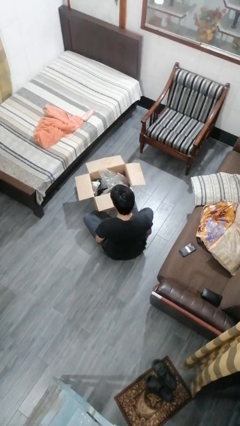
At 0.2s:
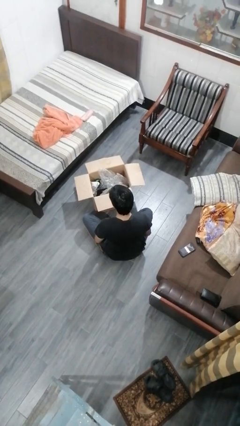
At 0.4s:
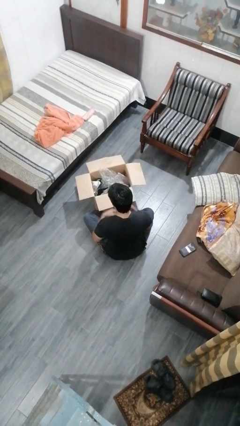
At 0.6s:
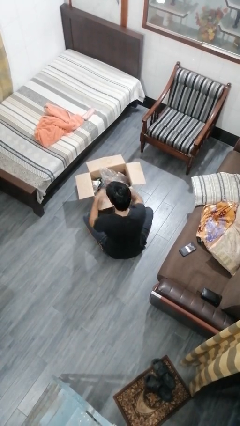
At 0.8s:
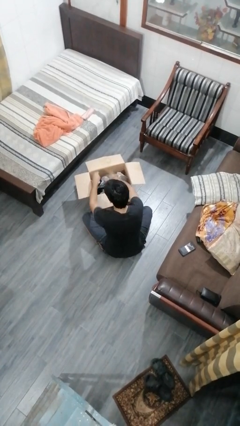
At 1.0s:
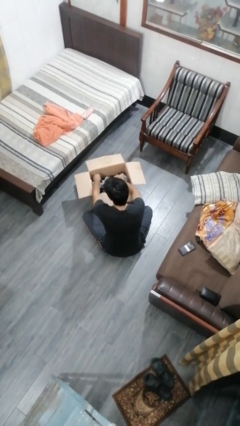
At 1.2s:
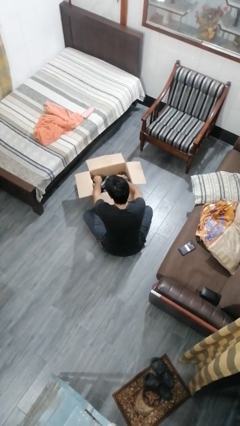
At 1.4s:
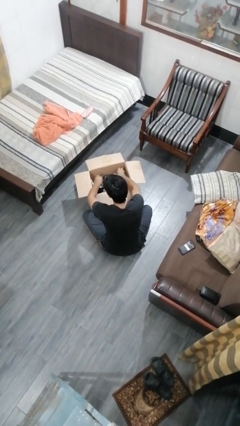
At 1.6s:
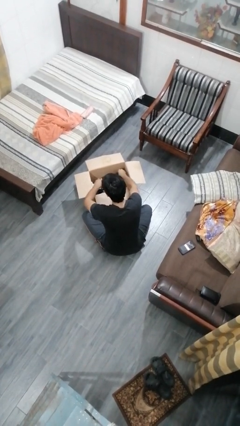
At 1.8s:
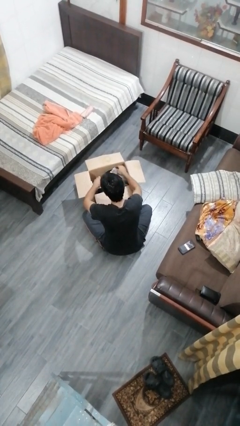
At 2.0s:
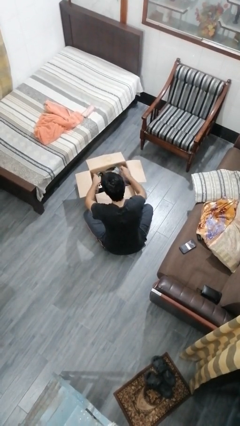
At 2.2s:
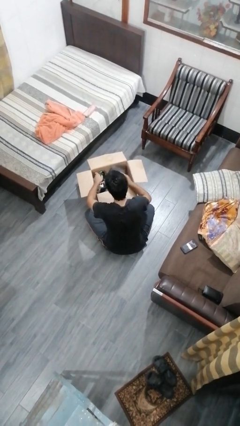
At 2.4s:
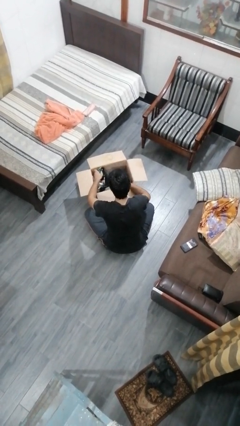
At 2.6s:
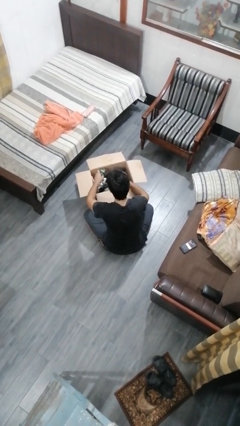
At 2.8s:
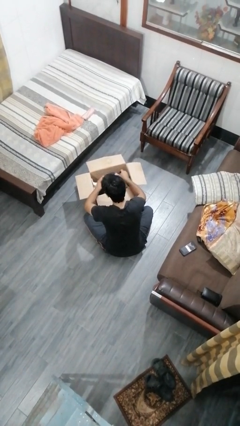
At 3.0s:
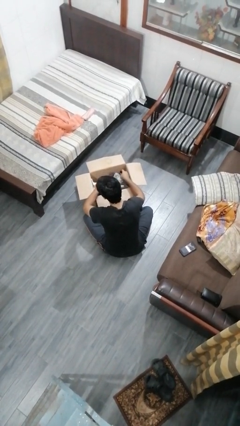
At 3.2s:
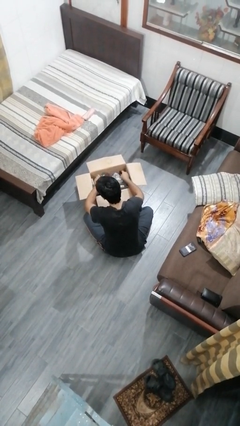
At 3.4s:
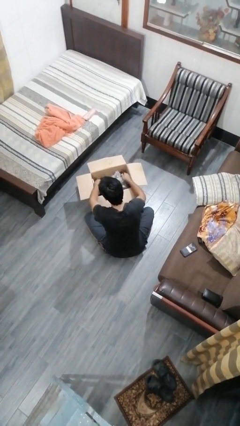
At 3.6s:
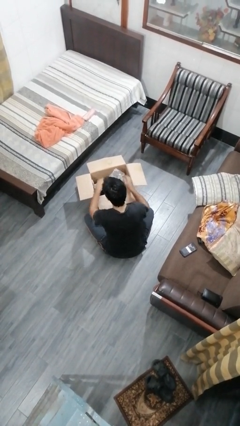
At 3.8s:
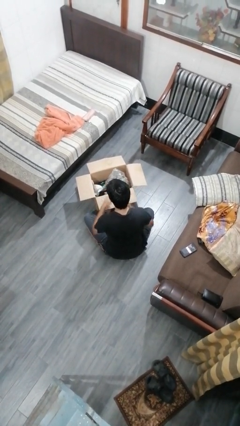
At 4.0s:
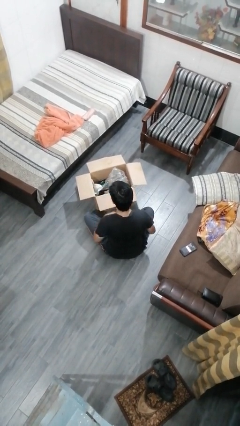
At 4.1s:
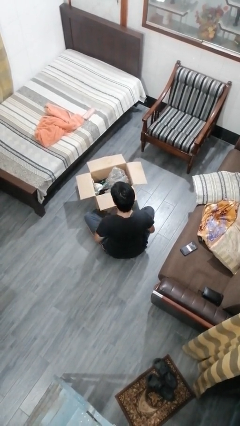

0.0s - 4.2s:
person searches in box

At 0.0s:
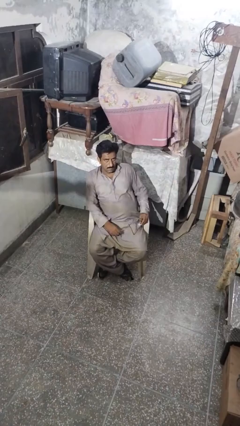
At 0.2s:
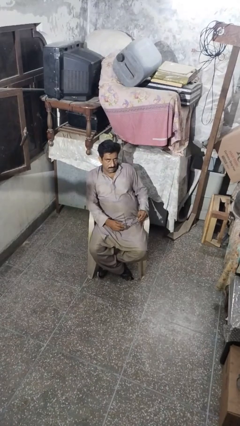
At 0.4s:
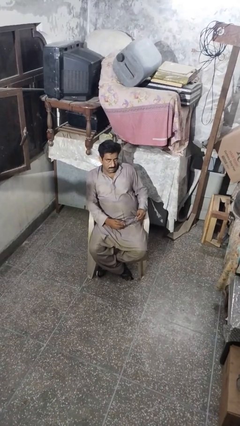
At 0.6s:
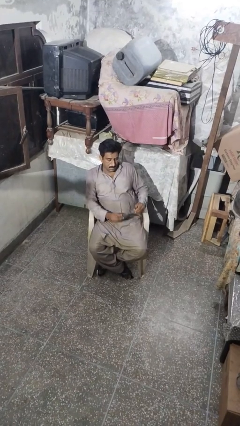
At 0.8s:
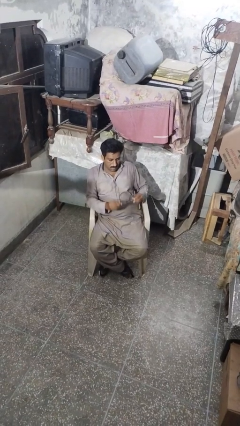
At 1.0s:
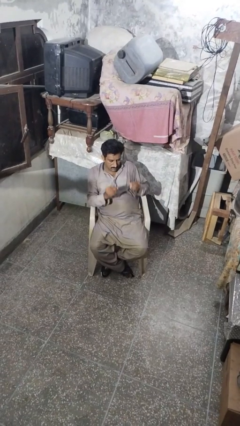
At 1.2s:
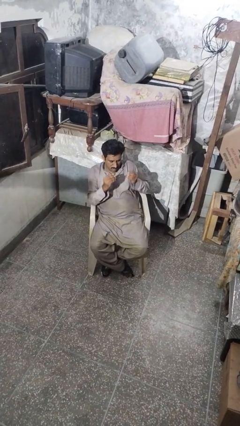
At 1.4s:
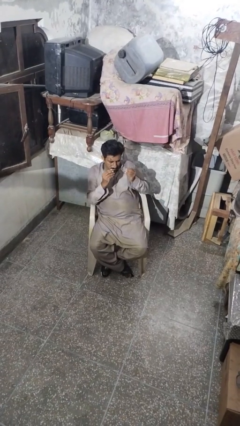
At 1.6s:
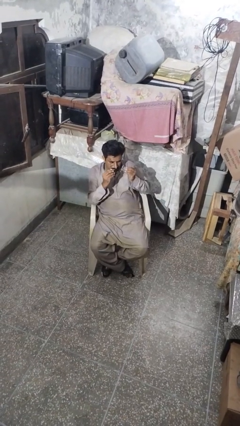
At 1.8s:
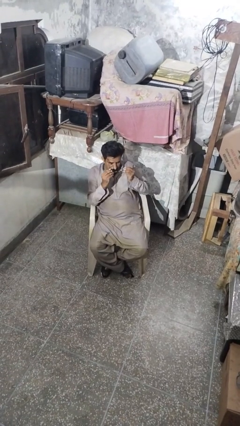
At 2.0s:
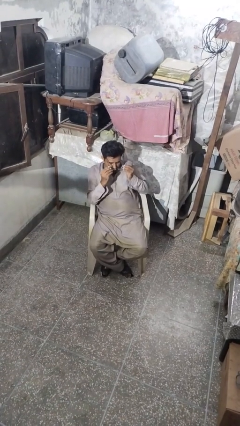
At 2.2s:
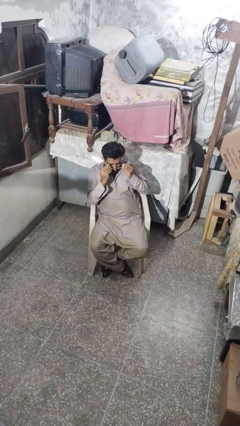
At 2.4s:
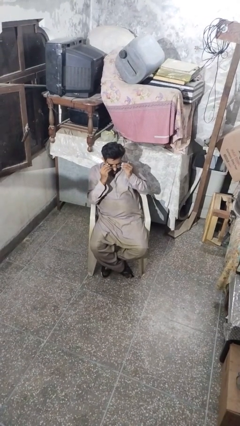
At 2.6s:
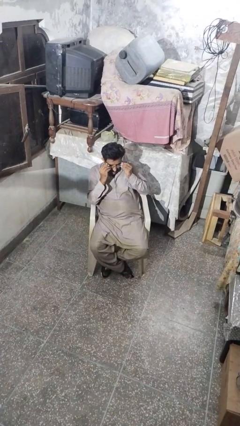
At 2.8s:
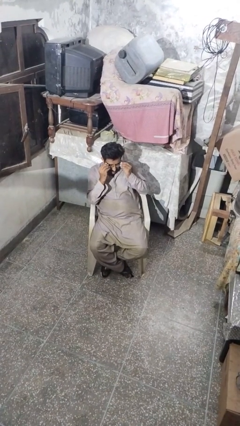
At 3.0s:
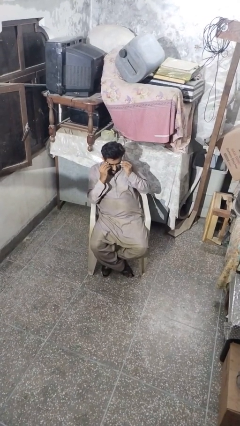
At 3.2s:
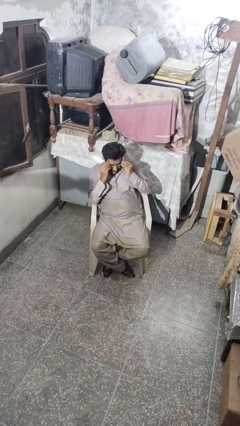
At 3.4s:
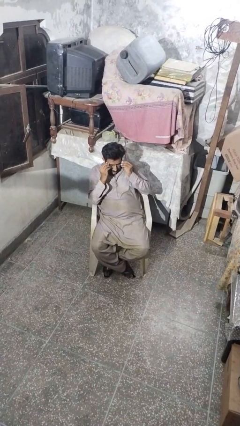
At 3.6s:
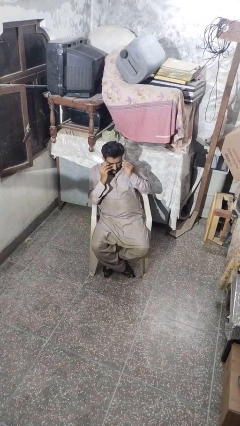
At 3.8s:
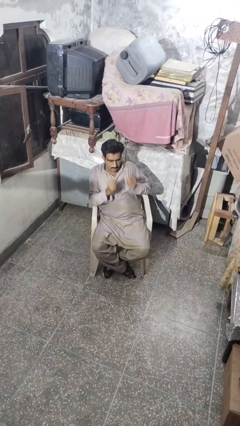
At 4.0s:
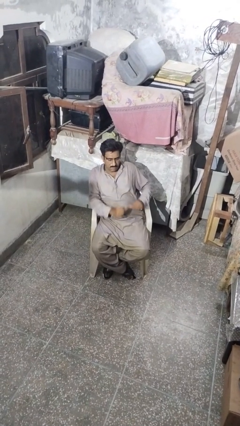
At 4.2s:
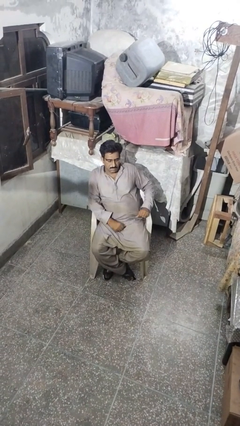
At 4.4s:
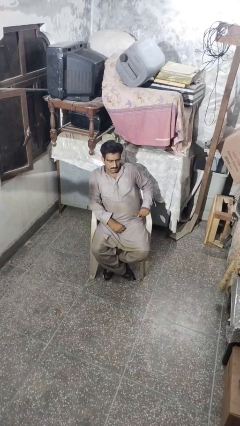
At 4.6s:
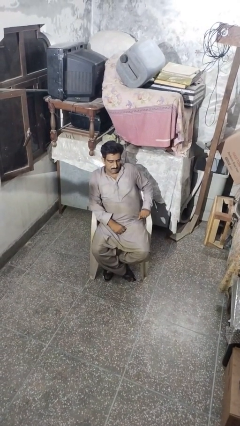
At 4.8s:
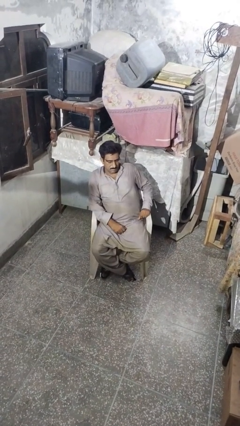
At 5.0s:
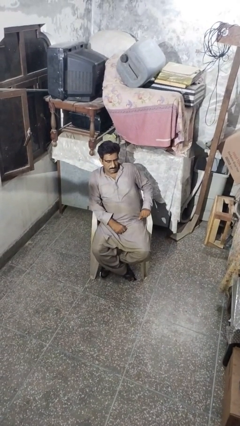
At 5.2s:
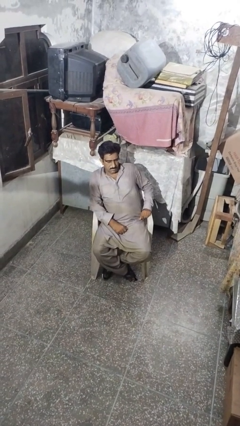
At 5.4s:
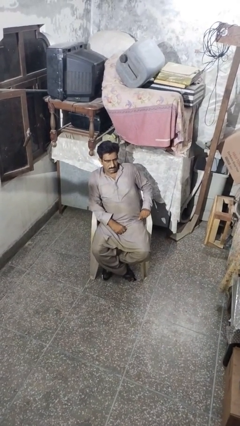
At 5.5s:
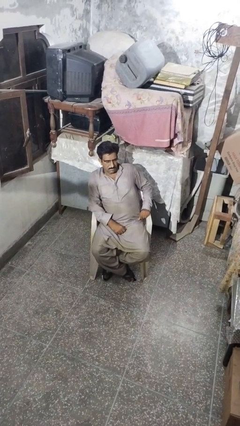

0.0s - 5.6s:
person puts on glasses

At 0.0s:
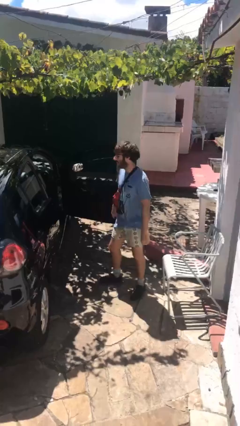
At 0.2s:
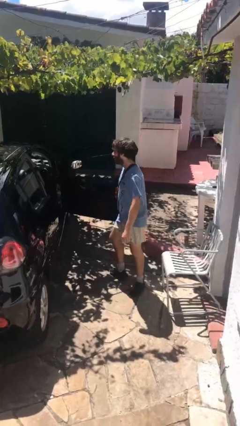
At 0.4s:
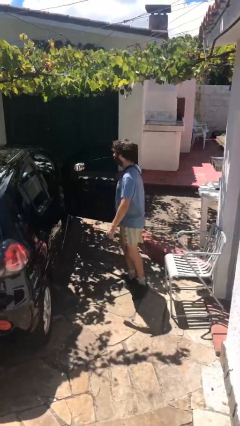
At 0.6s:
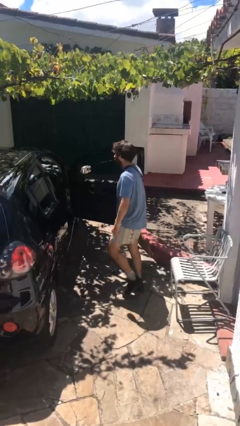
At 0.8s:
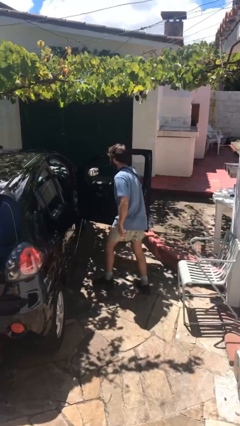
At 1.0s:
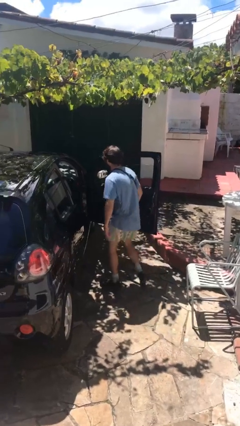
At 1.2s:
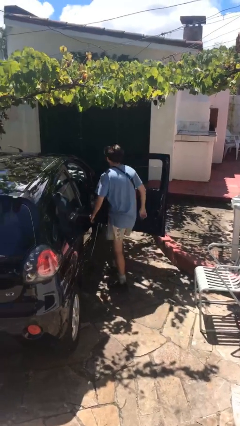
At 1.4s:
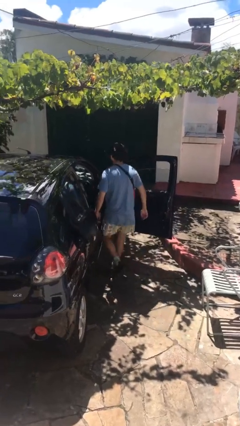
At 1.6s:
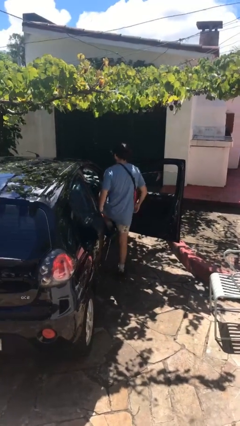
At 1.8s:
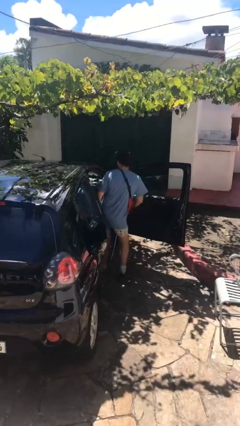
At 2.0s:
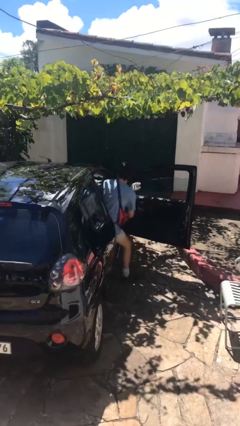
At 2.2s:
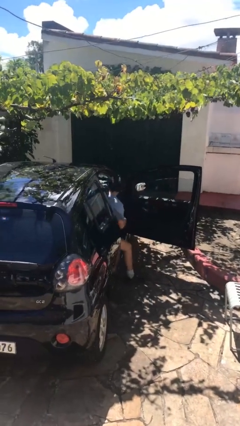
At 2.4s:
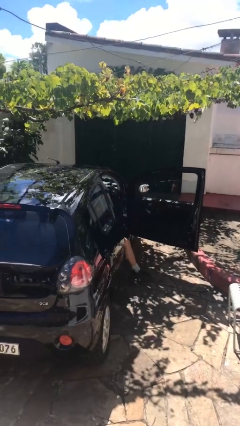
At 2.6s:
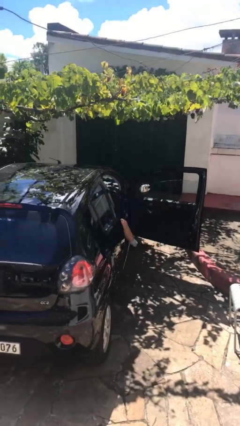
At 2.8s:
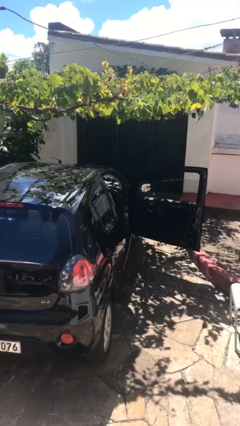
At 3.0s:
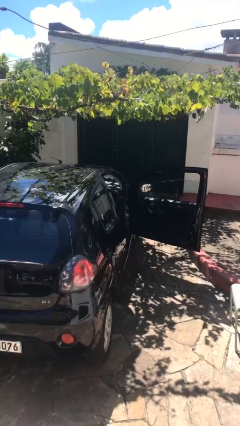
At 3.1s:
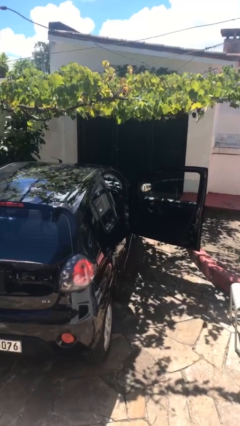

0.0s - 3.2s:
person enters car

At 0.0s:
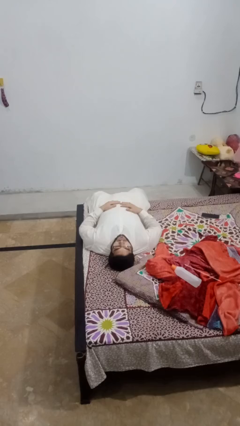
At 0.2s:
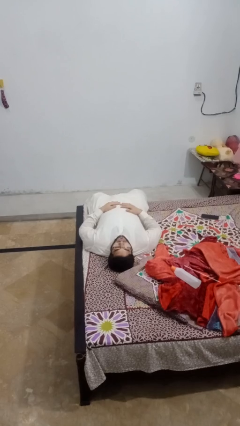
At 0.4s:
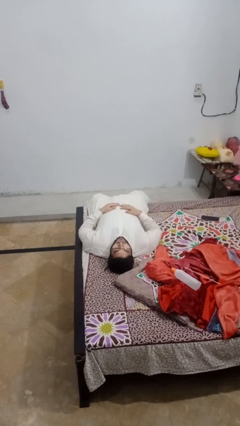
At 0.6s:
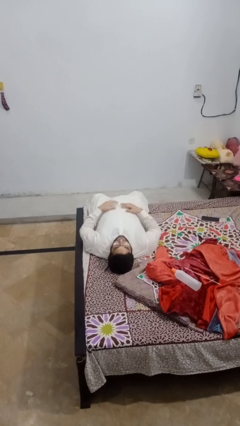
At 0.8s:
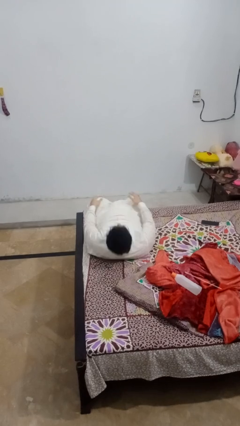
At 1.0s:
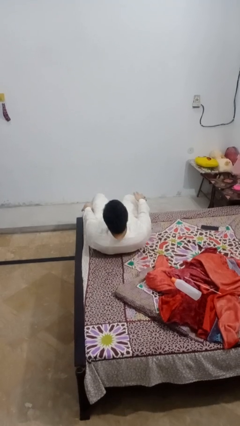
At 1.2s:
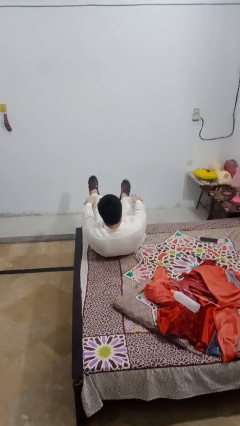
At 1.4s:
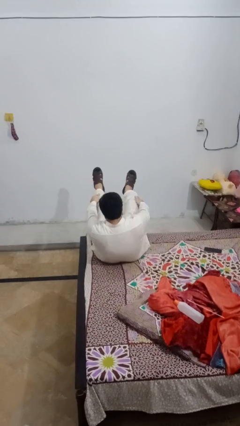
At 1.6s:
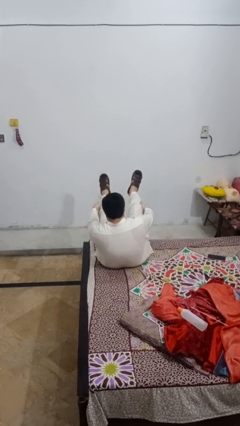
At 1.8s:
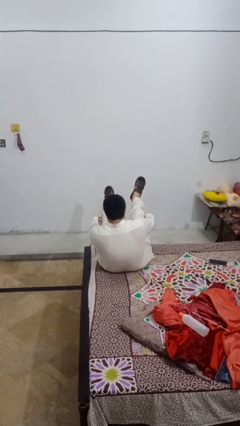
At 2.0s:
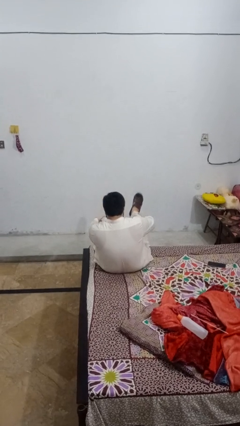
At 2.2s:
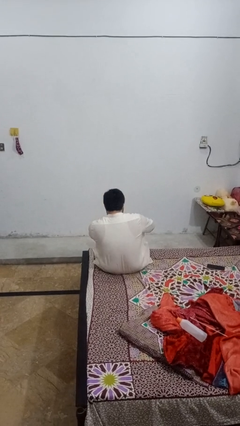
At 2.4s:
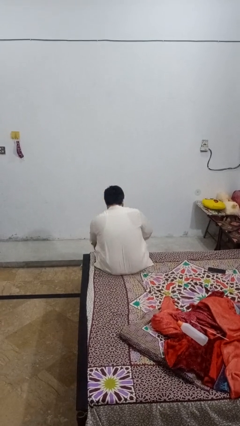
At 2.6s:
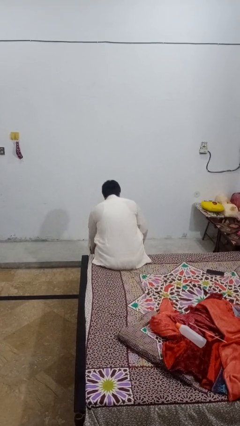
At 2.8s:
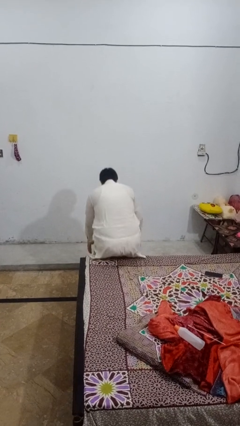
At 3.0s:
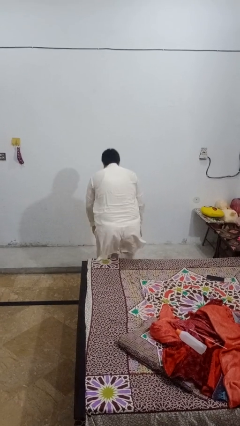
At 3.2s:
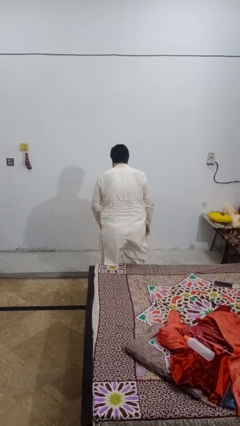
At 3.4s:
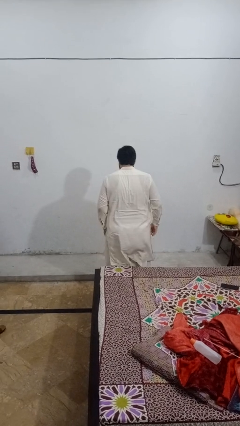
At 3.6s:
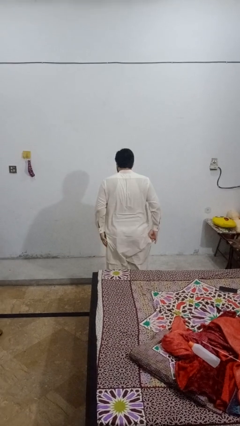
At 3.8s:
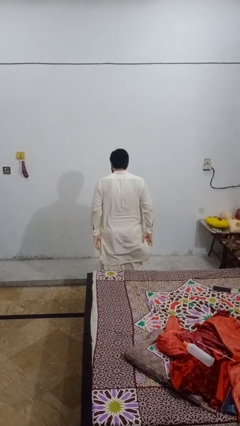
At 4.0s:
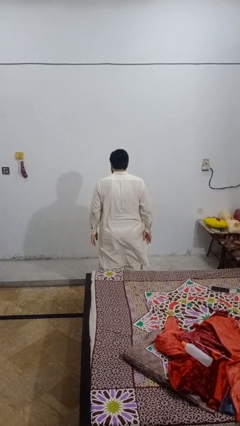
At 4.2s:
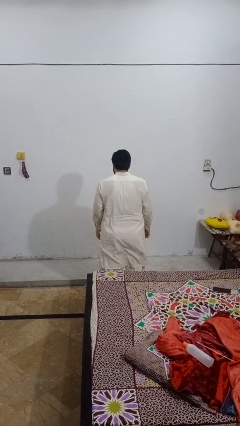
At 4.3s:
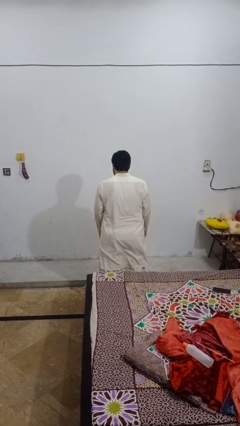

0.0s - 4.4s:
person stands up

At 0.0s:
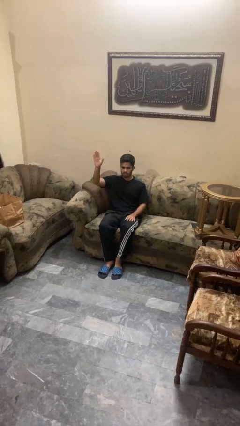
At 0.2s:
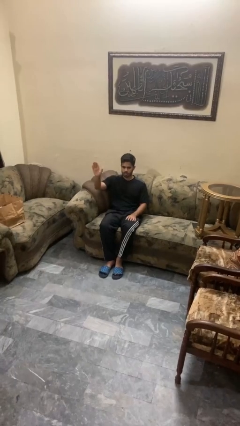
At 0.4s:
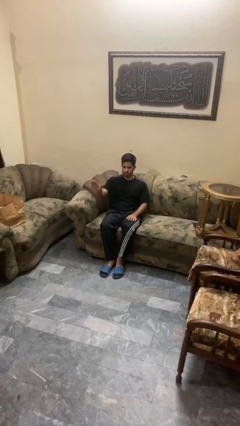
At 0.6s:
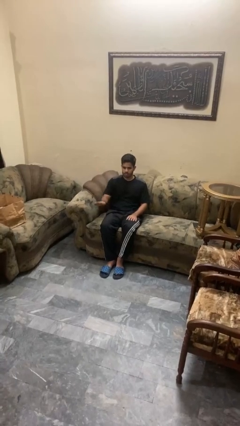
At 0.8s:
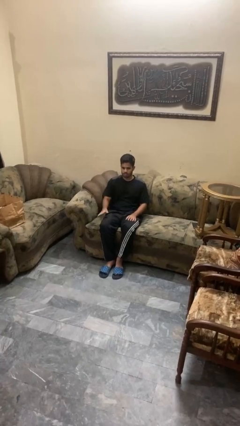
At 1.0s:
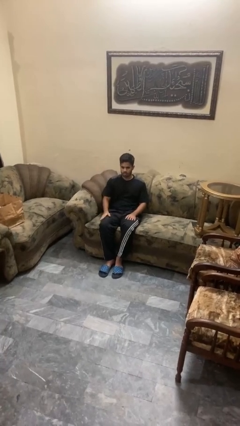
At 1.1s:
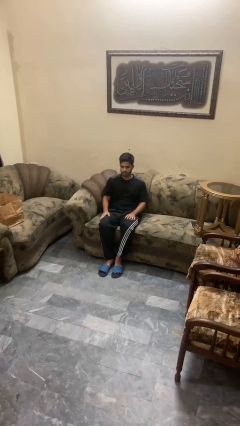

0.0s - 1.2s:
person gestures lower hand
